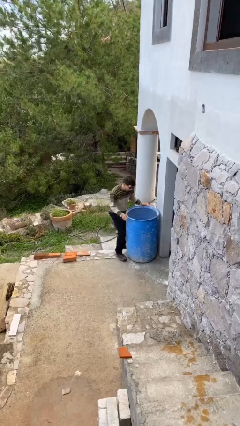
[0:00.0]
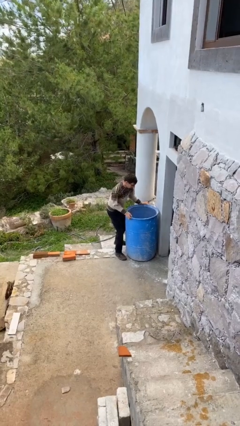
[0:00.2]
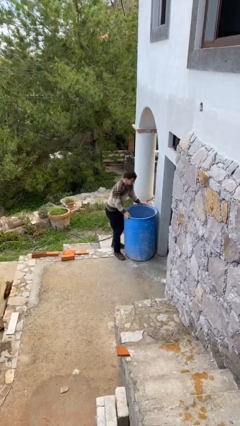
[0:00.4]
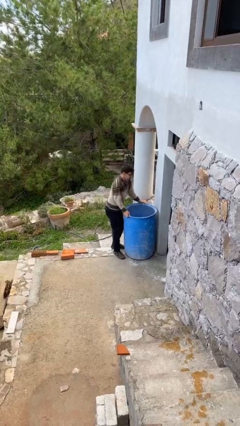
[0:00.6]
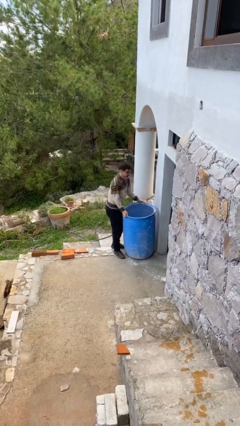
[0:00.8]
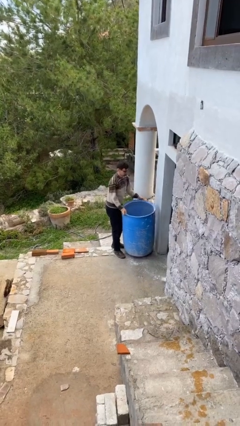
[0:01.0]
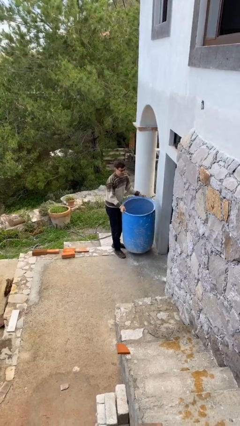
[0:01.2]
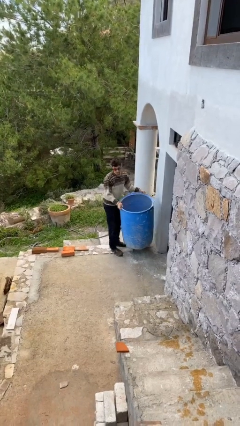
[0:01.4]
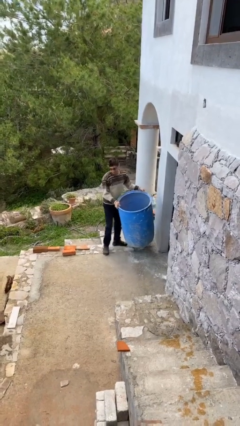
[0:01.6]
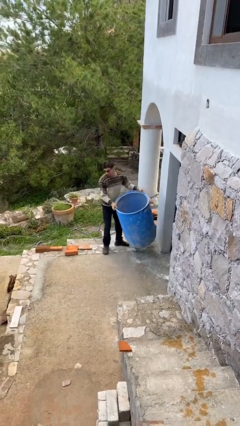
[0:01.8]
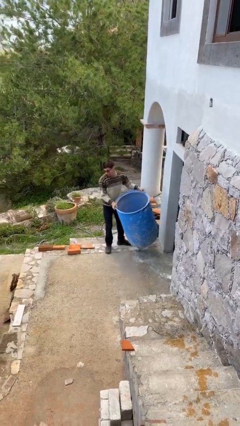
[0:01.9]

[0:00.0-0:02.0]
person picks up object from floor

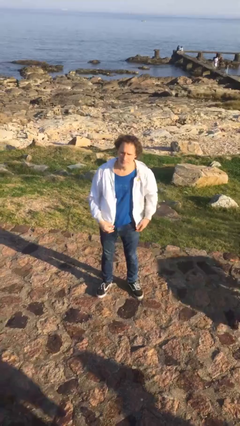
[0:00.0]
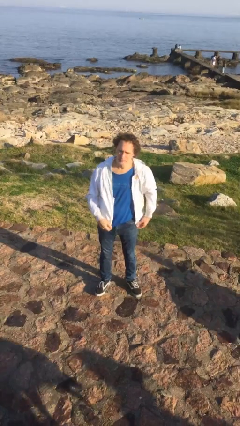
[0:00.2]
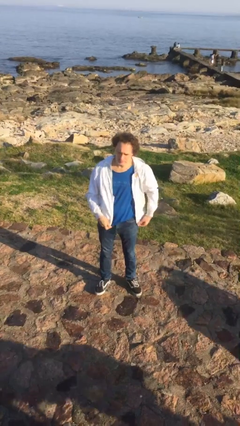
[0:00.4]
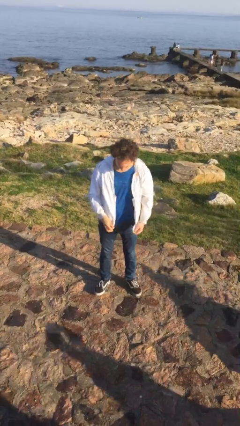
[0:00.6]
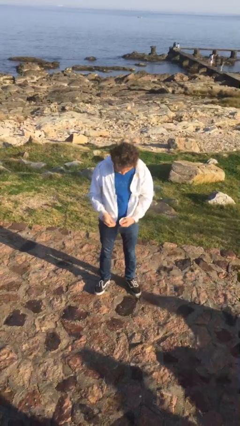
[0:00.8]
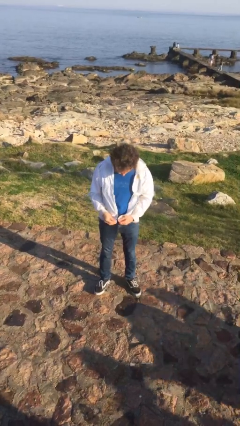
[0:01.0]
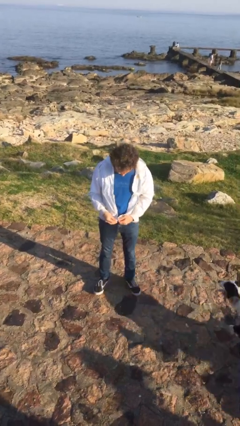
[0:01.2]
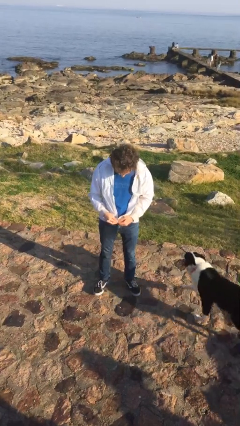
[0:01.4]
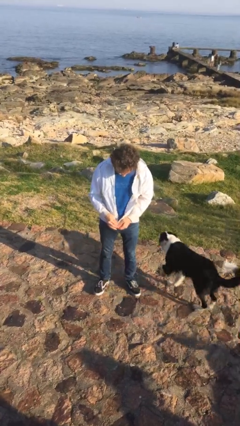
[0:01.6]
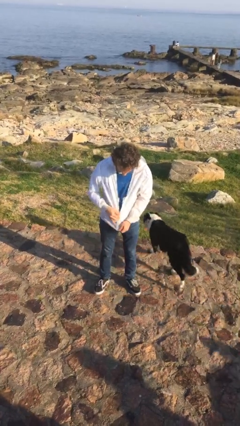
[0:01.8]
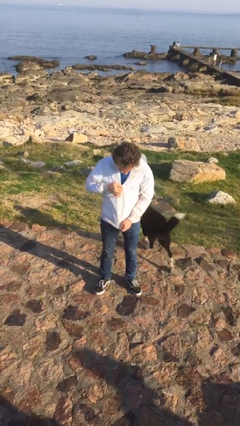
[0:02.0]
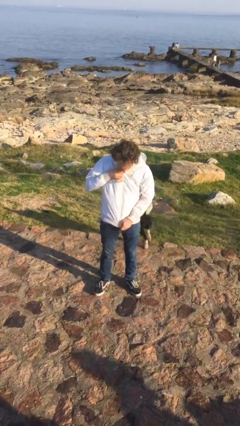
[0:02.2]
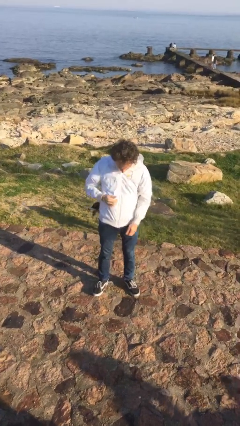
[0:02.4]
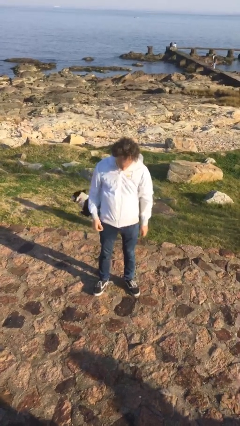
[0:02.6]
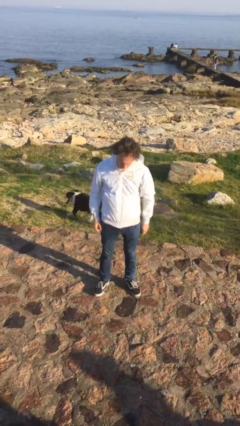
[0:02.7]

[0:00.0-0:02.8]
person zips up jacket

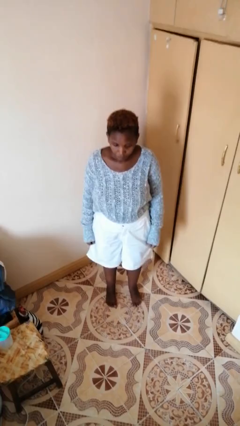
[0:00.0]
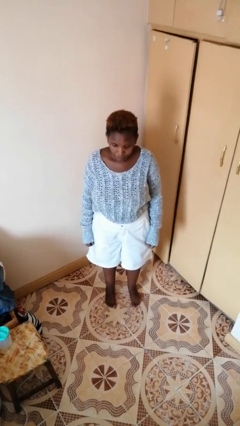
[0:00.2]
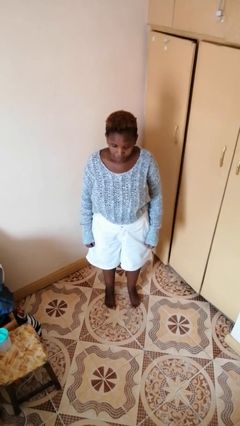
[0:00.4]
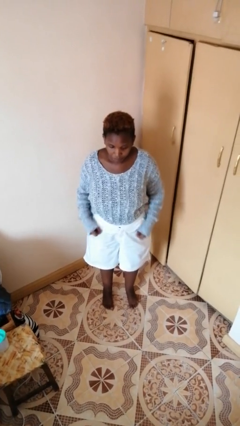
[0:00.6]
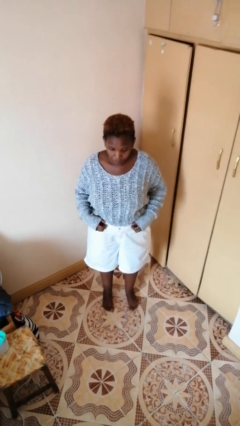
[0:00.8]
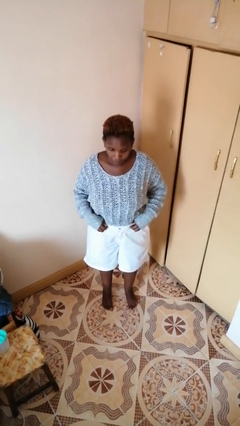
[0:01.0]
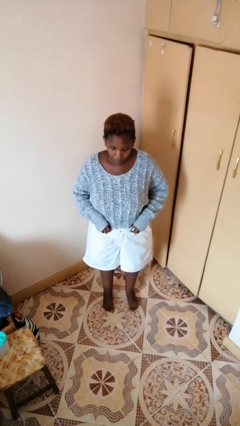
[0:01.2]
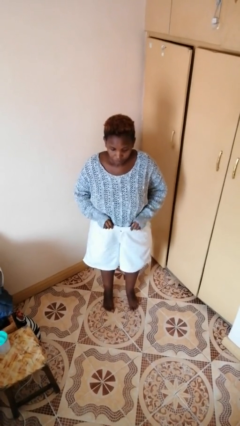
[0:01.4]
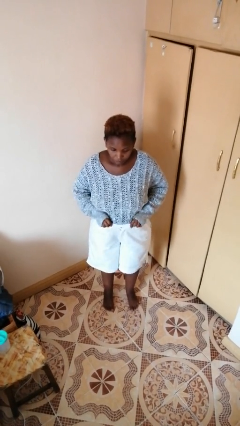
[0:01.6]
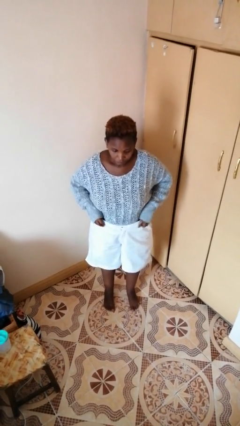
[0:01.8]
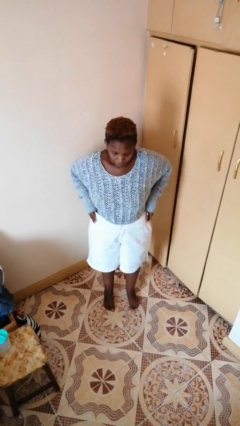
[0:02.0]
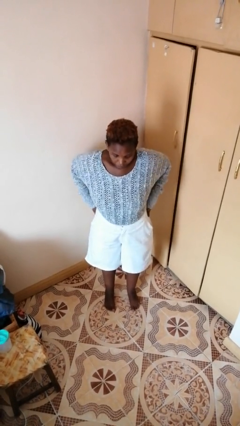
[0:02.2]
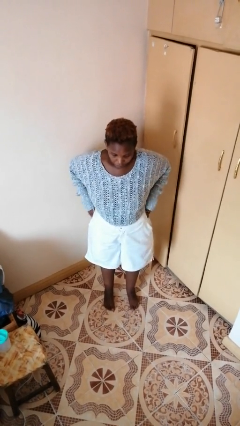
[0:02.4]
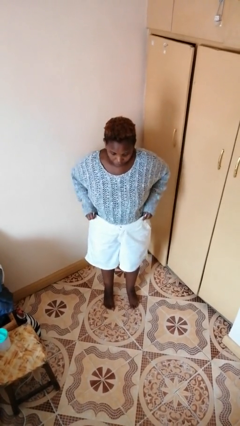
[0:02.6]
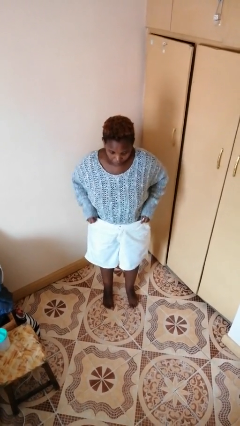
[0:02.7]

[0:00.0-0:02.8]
person hikes up pants

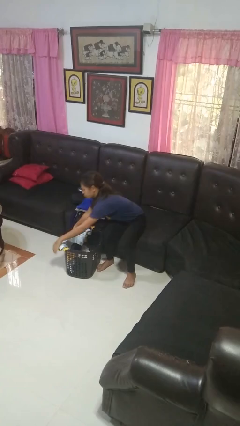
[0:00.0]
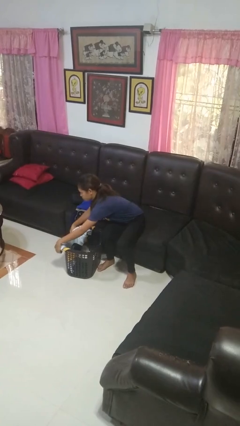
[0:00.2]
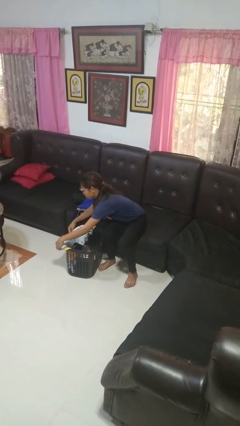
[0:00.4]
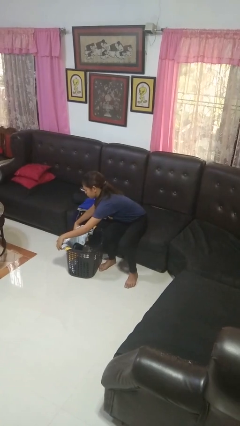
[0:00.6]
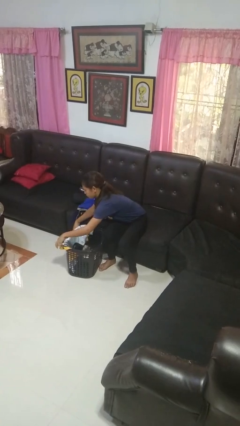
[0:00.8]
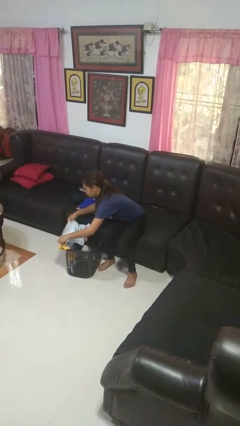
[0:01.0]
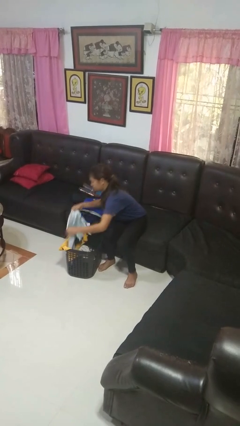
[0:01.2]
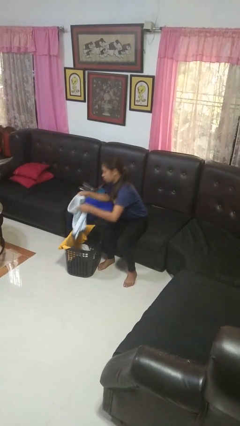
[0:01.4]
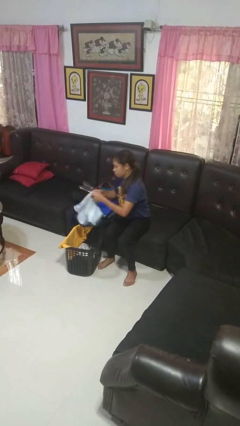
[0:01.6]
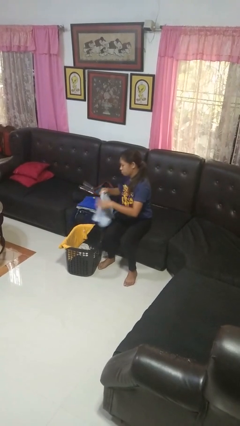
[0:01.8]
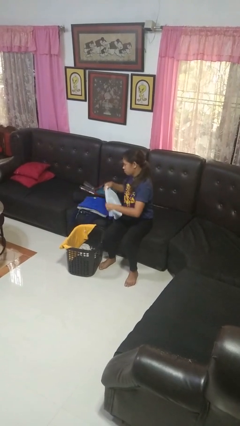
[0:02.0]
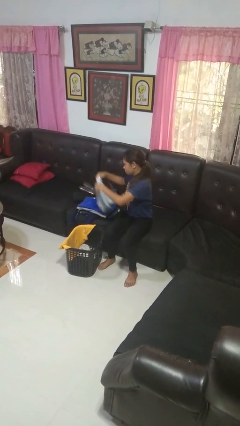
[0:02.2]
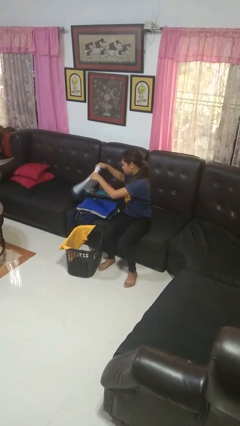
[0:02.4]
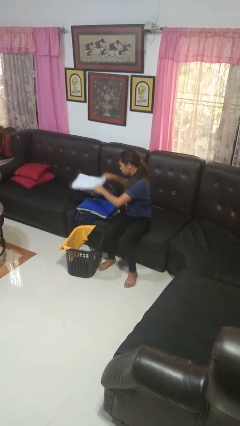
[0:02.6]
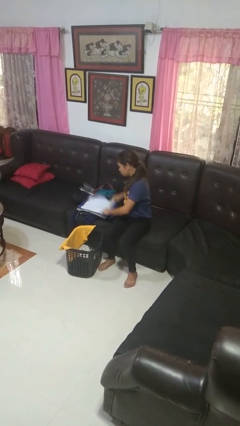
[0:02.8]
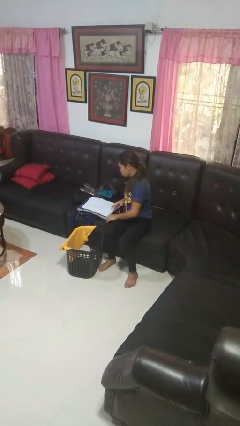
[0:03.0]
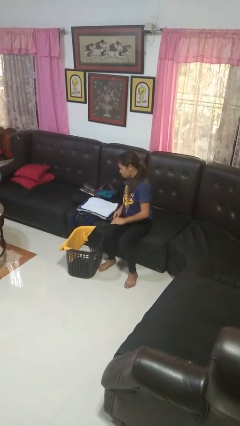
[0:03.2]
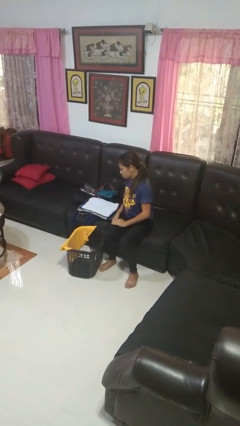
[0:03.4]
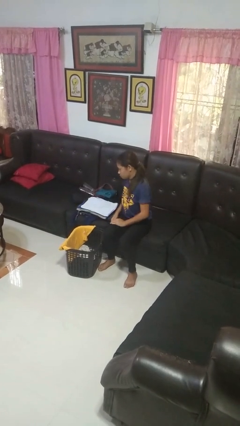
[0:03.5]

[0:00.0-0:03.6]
person folds shirt

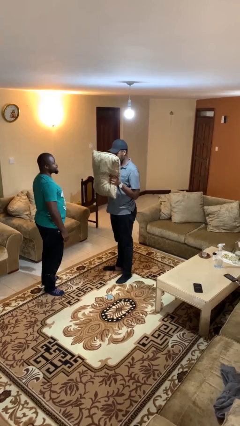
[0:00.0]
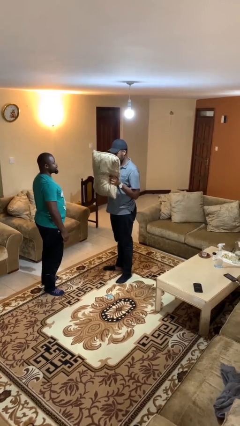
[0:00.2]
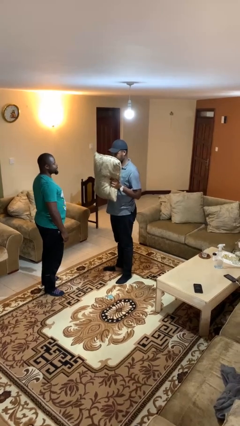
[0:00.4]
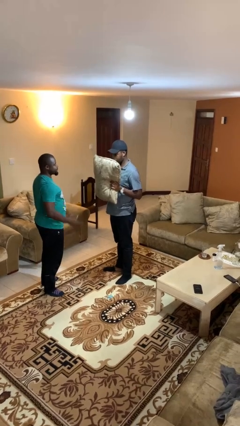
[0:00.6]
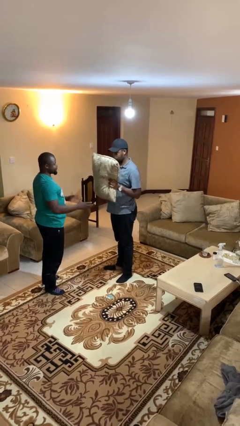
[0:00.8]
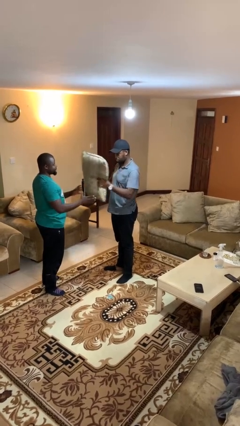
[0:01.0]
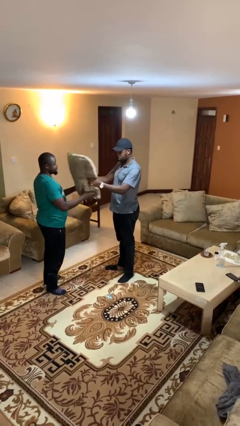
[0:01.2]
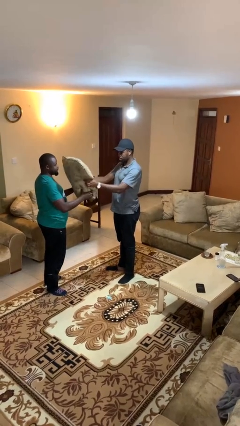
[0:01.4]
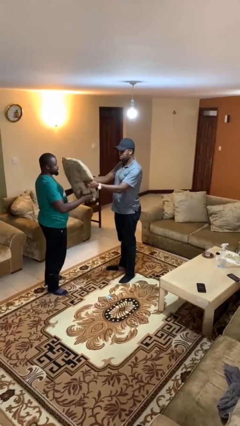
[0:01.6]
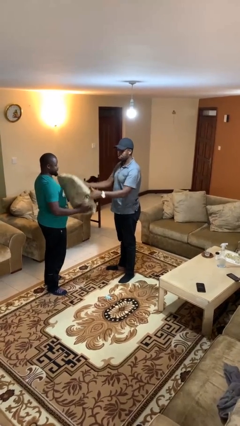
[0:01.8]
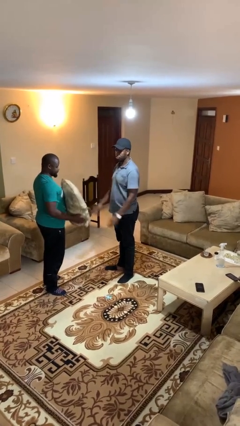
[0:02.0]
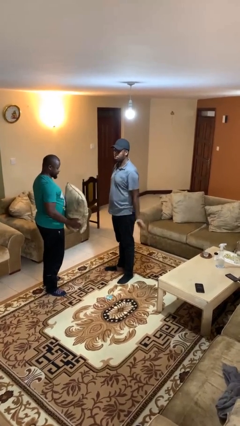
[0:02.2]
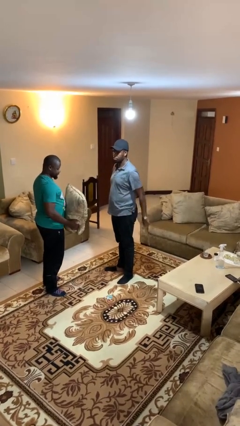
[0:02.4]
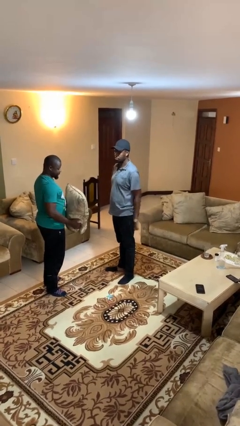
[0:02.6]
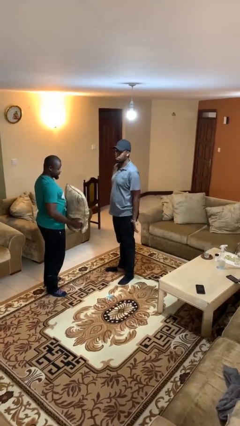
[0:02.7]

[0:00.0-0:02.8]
person transfers object to person

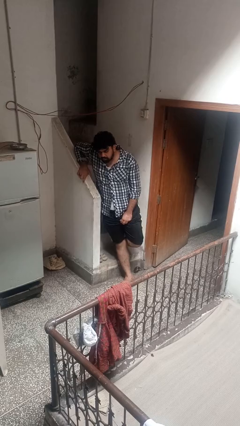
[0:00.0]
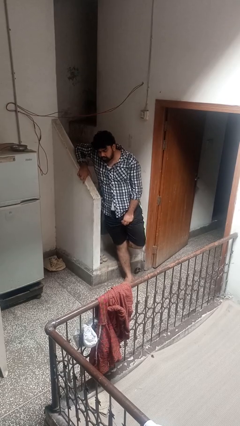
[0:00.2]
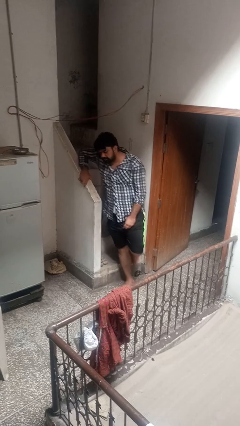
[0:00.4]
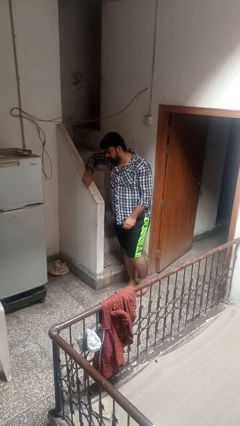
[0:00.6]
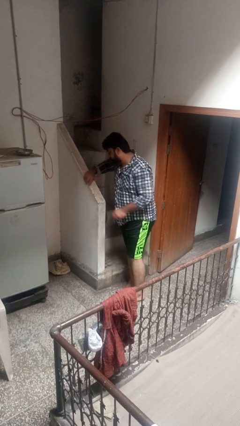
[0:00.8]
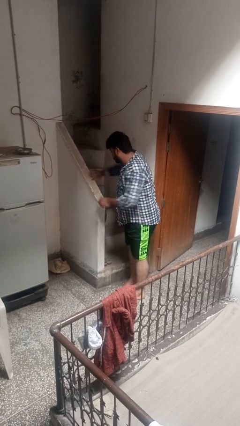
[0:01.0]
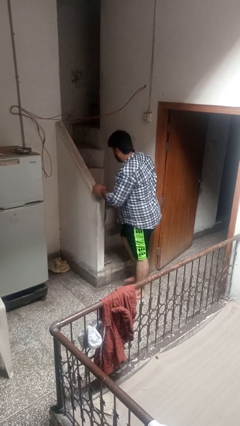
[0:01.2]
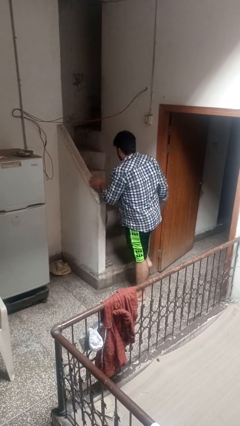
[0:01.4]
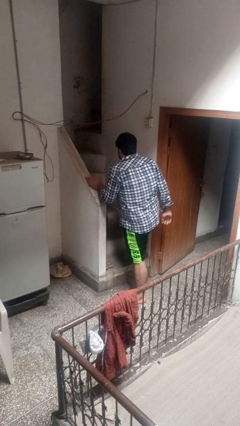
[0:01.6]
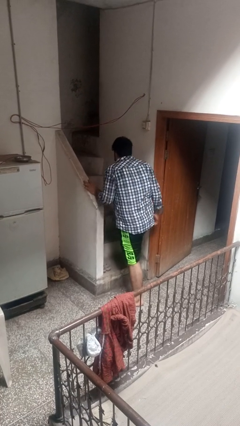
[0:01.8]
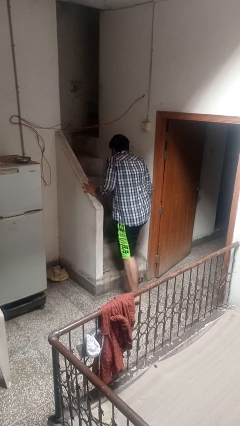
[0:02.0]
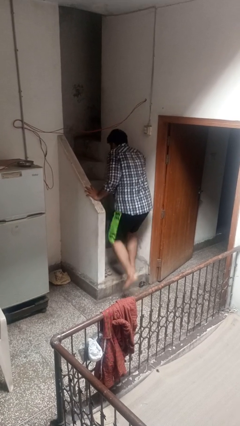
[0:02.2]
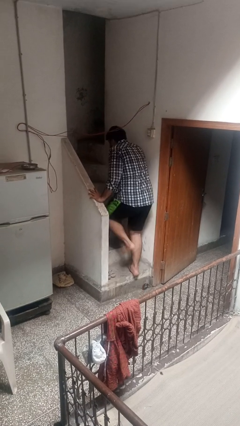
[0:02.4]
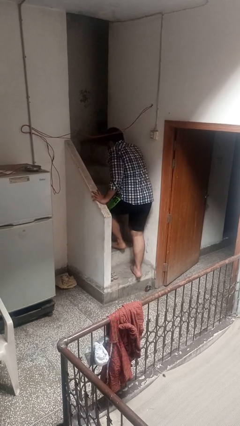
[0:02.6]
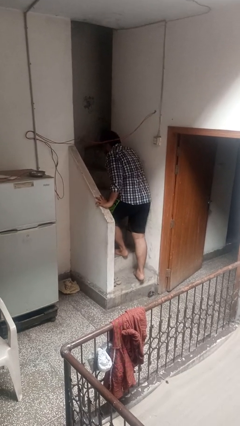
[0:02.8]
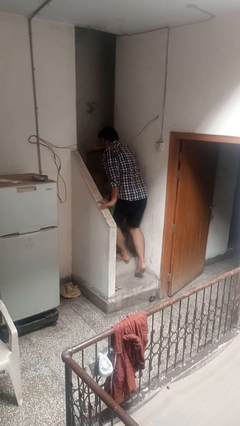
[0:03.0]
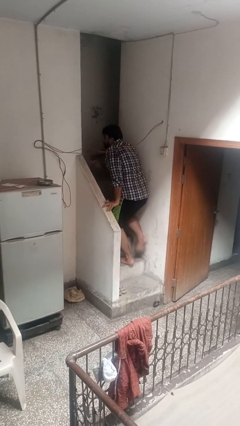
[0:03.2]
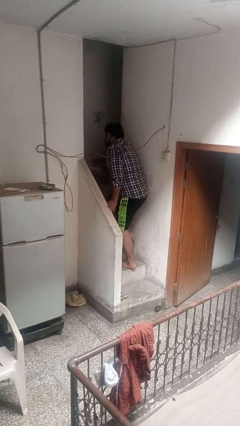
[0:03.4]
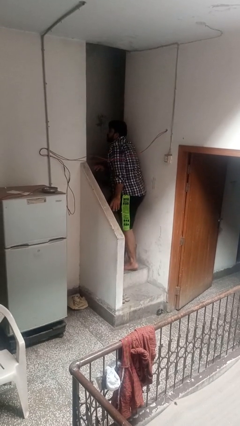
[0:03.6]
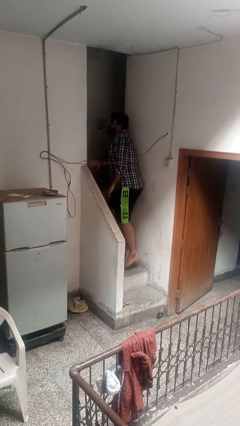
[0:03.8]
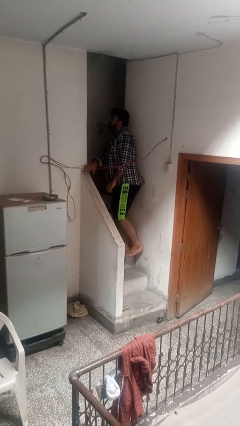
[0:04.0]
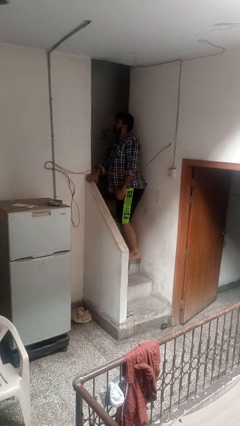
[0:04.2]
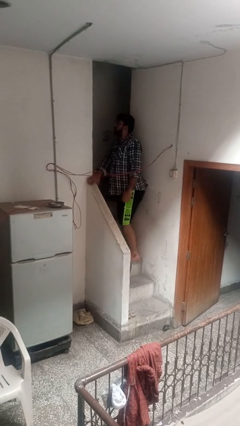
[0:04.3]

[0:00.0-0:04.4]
person climbs up stairs
